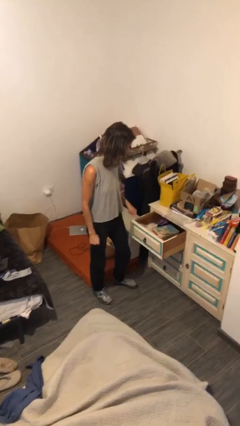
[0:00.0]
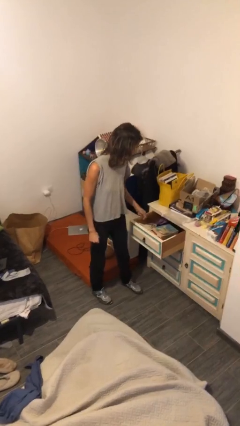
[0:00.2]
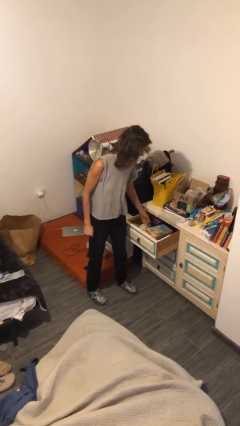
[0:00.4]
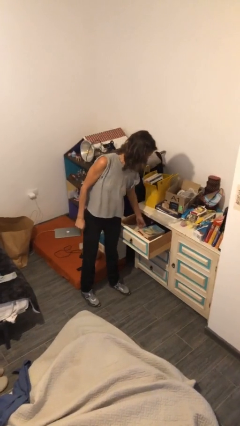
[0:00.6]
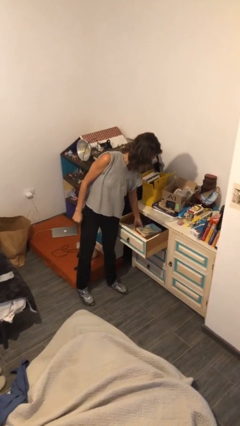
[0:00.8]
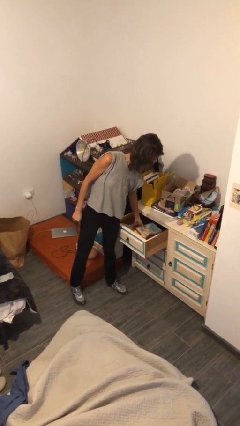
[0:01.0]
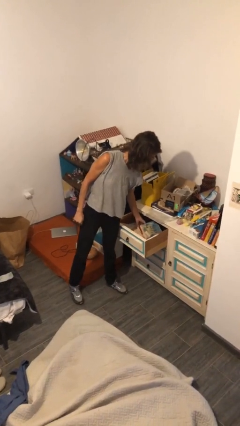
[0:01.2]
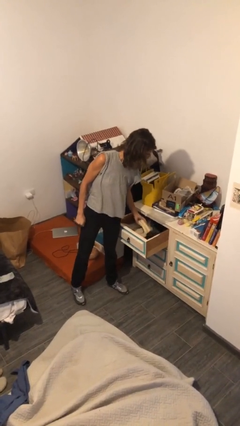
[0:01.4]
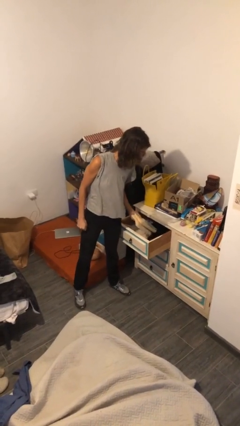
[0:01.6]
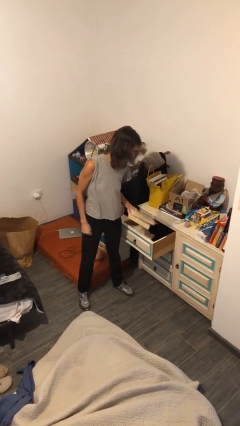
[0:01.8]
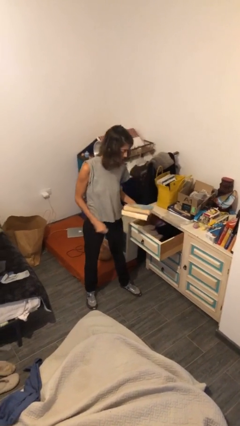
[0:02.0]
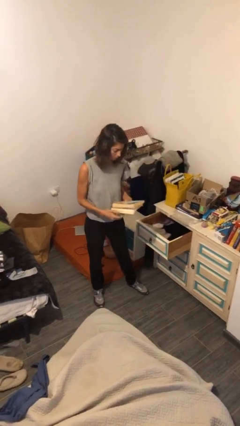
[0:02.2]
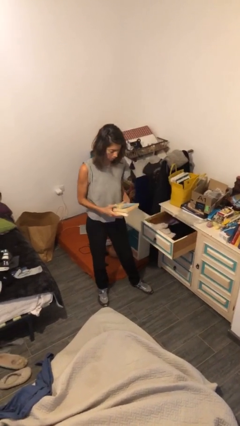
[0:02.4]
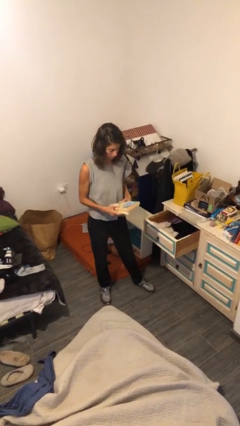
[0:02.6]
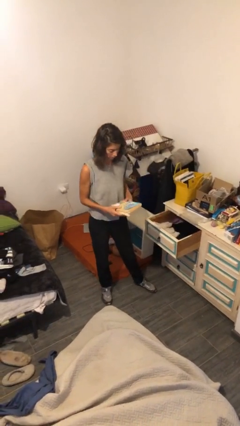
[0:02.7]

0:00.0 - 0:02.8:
person picks up object from cabinet

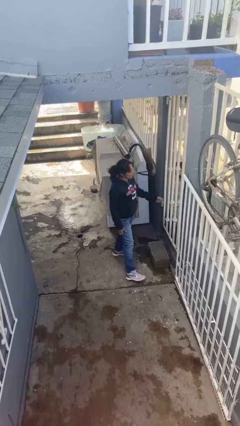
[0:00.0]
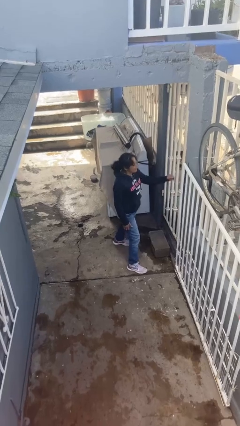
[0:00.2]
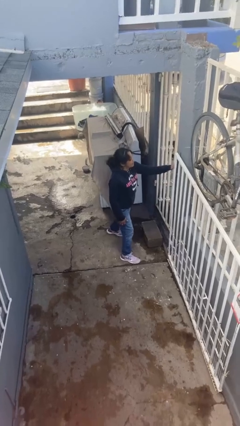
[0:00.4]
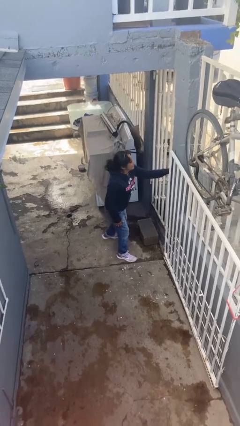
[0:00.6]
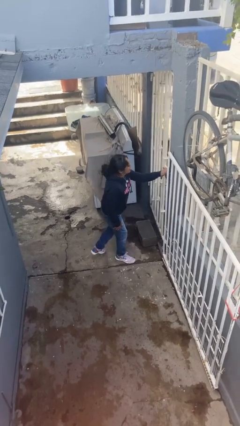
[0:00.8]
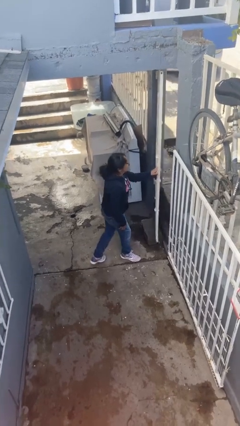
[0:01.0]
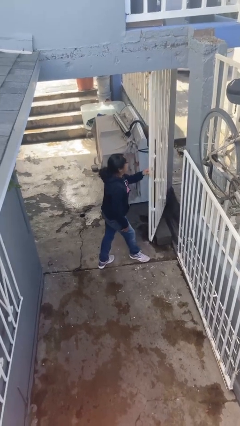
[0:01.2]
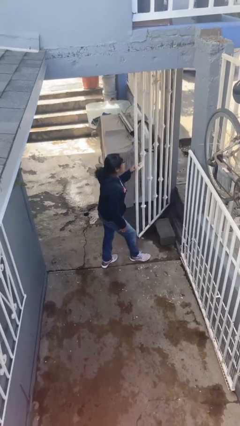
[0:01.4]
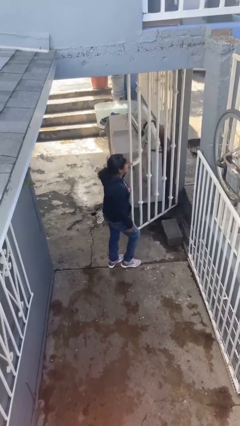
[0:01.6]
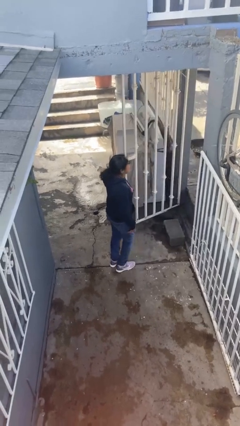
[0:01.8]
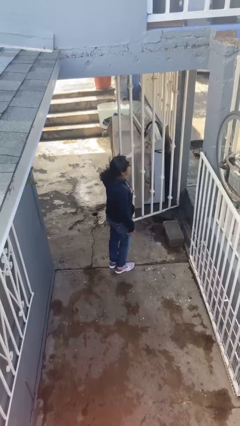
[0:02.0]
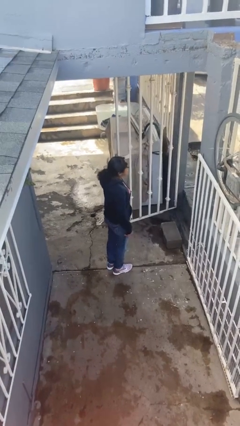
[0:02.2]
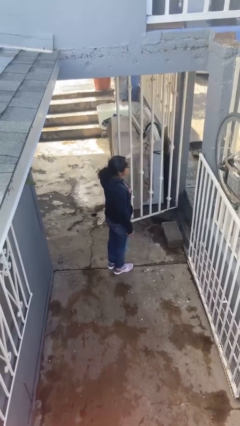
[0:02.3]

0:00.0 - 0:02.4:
person opens facility door
